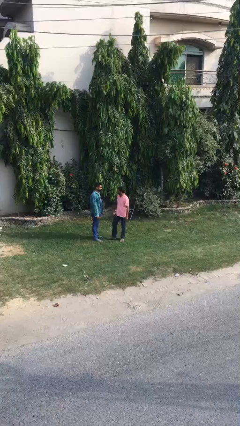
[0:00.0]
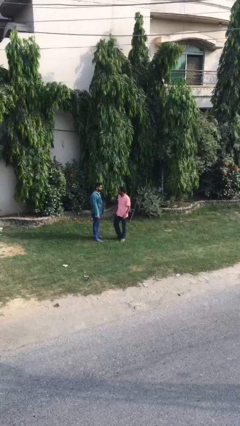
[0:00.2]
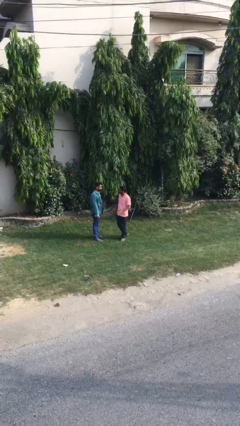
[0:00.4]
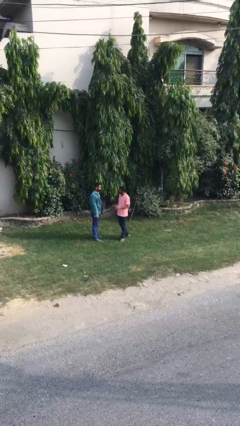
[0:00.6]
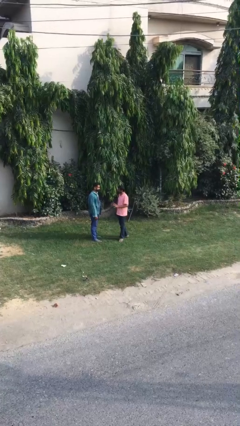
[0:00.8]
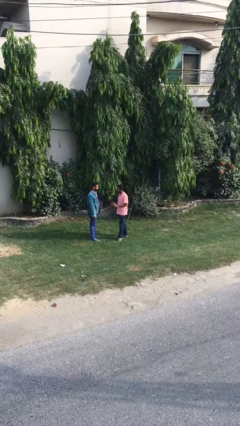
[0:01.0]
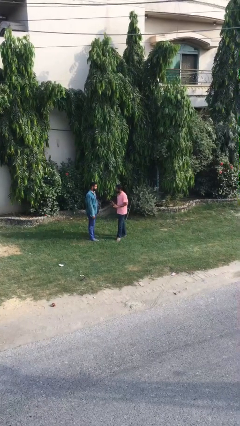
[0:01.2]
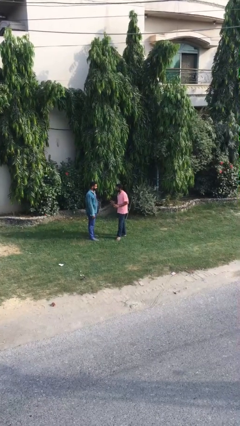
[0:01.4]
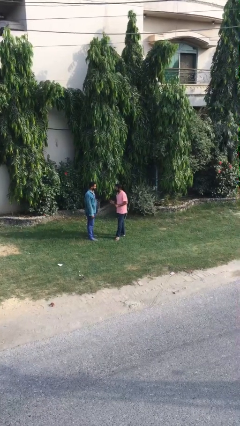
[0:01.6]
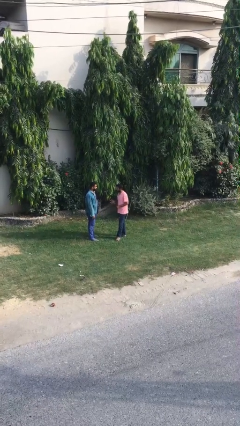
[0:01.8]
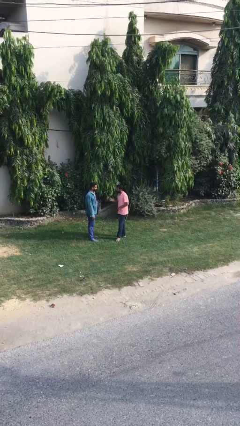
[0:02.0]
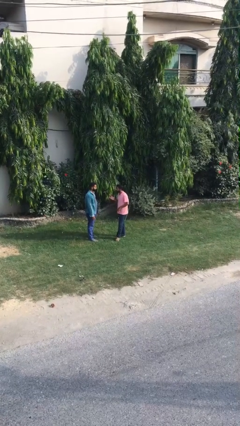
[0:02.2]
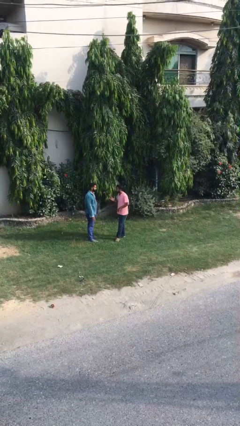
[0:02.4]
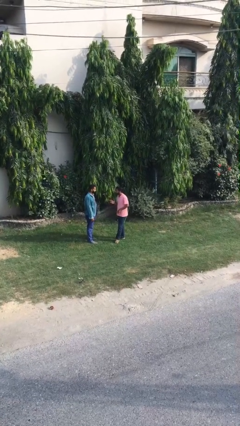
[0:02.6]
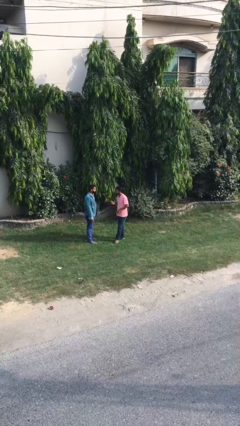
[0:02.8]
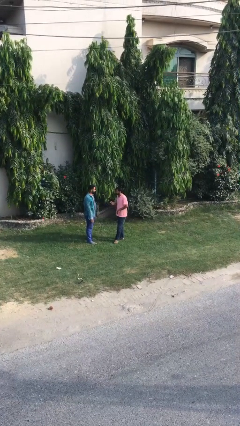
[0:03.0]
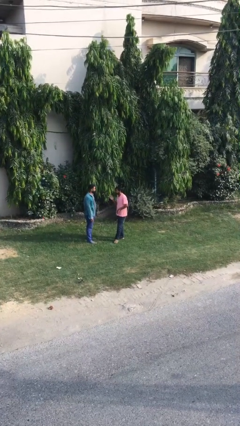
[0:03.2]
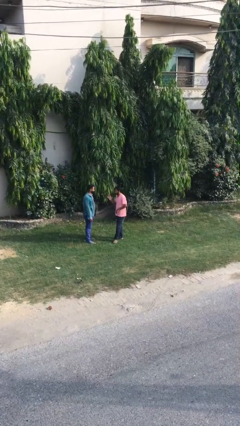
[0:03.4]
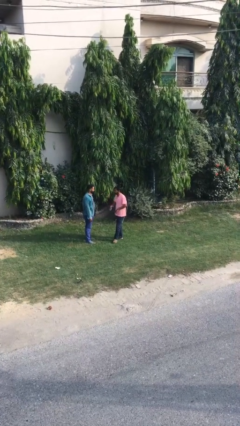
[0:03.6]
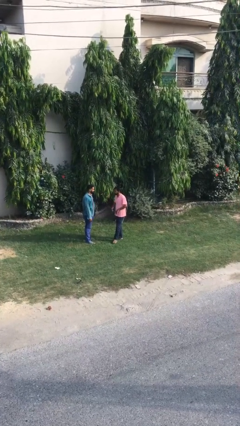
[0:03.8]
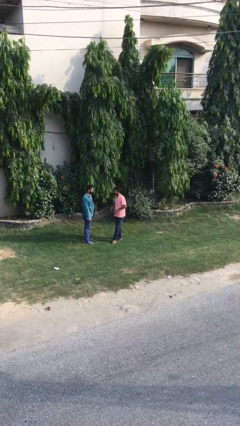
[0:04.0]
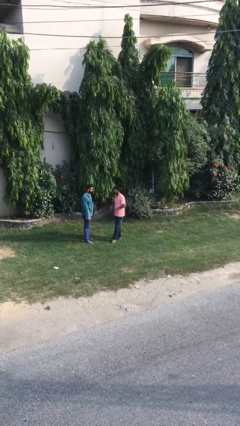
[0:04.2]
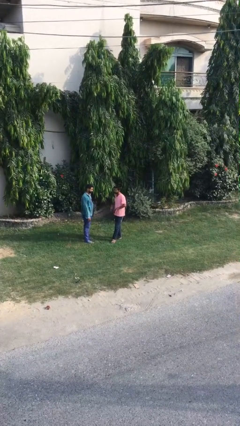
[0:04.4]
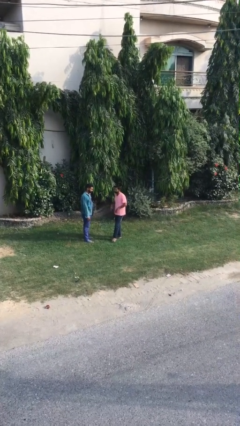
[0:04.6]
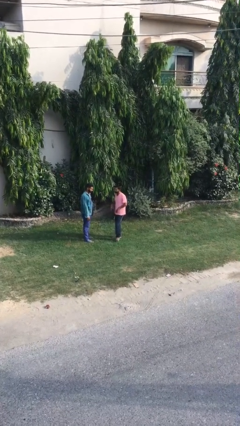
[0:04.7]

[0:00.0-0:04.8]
person talks to person

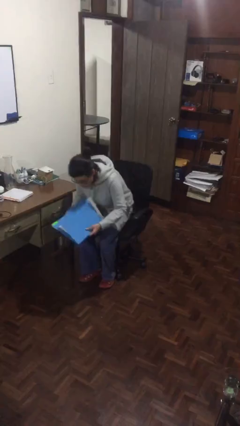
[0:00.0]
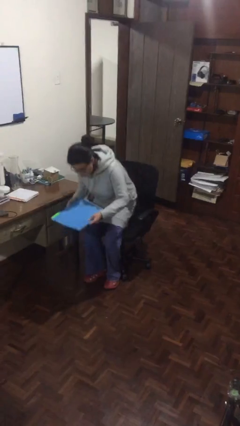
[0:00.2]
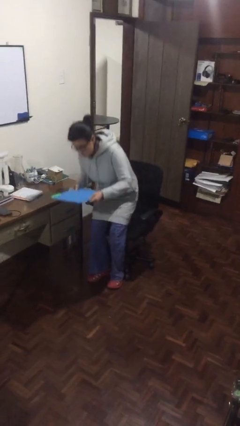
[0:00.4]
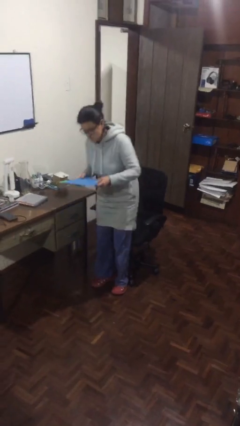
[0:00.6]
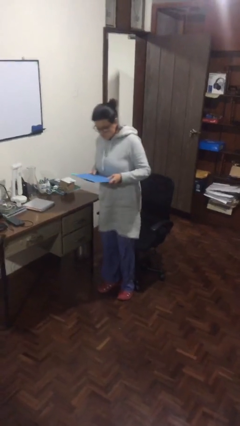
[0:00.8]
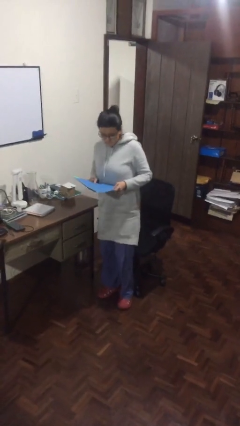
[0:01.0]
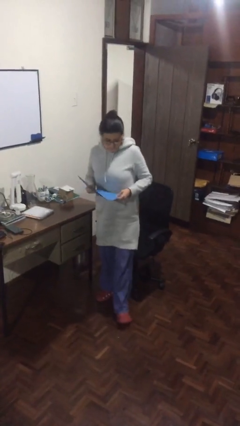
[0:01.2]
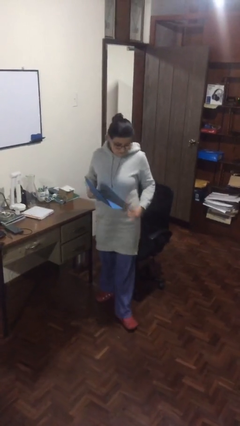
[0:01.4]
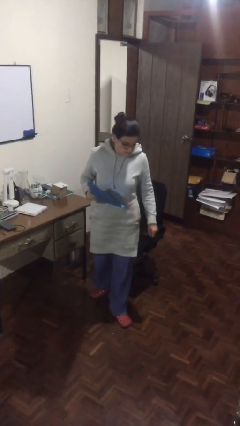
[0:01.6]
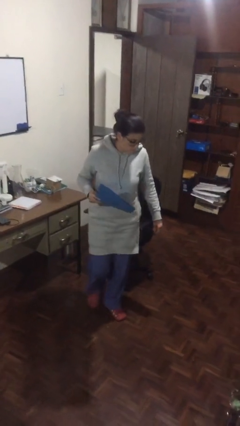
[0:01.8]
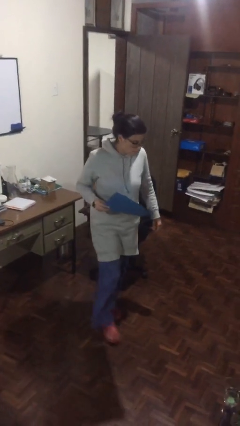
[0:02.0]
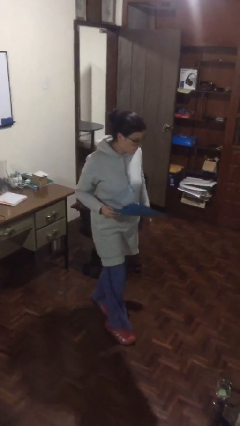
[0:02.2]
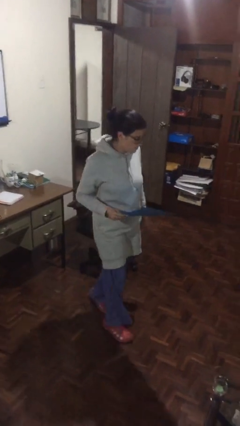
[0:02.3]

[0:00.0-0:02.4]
person stands up

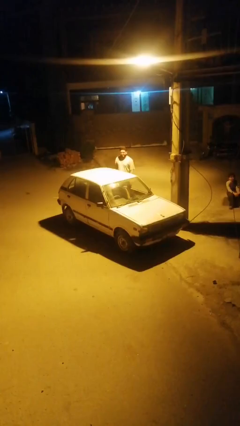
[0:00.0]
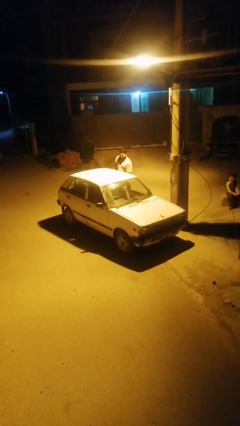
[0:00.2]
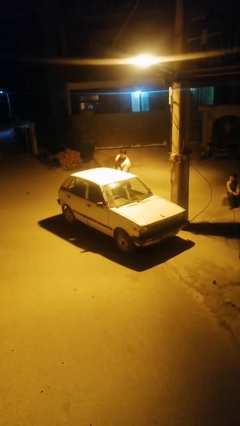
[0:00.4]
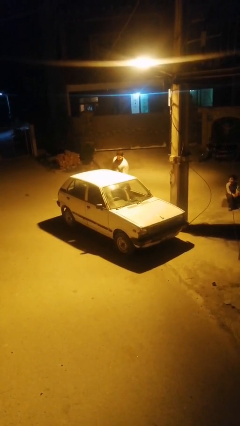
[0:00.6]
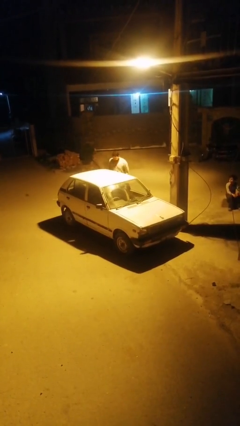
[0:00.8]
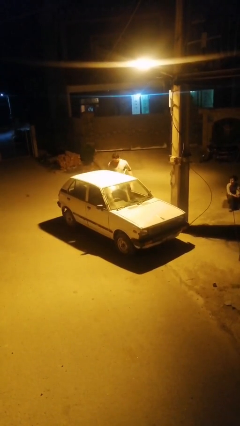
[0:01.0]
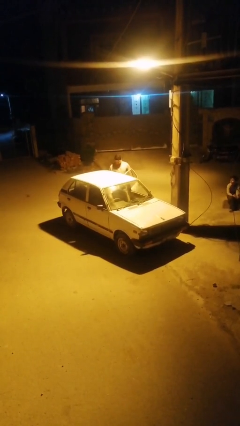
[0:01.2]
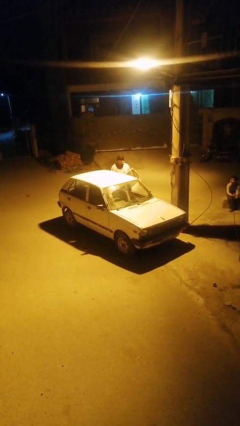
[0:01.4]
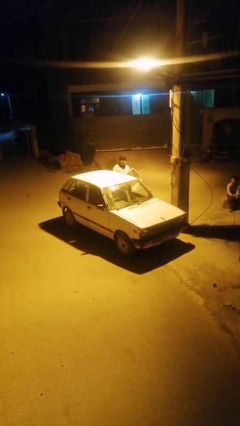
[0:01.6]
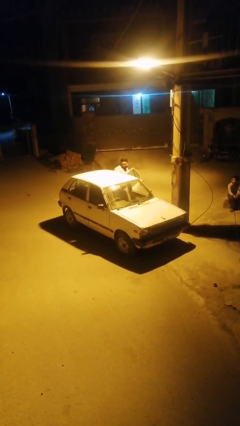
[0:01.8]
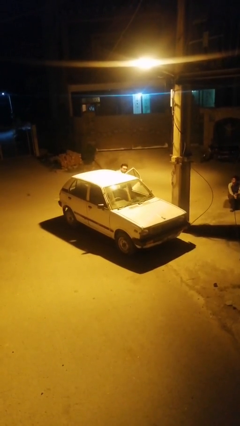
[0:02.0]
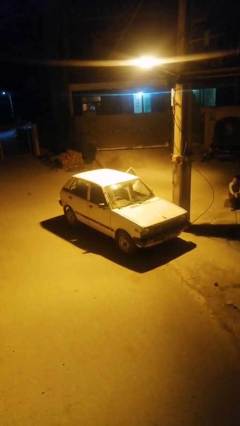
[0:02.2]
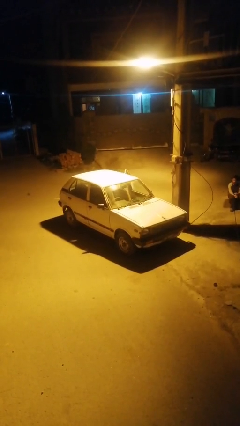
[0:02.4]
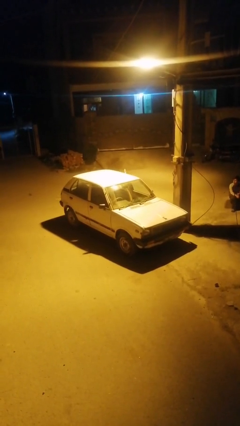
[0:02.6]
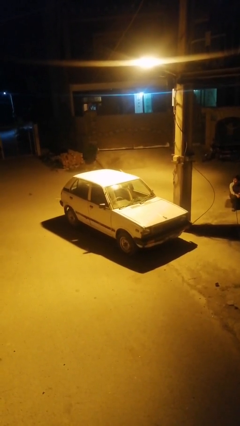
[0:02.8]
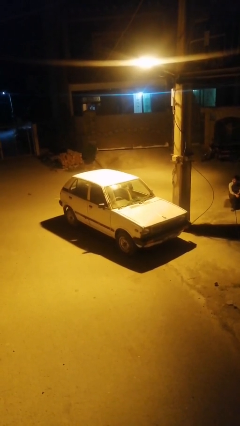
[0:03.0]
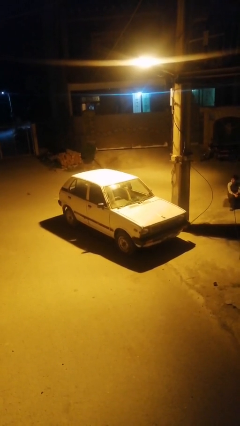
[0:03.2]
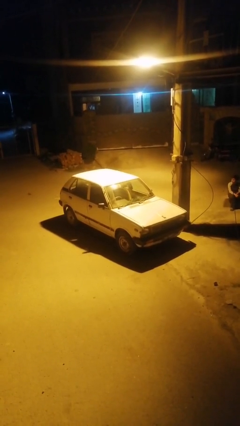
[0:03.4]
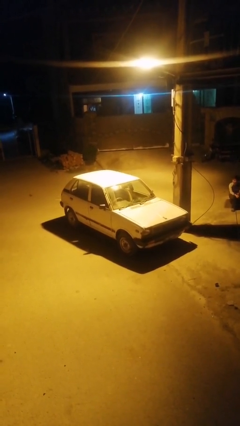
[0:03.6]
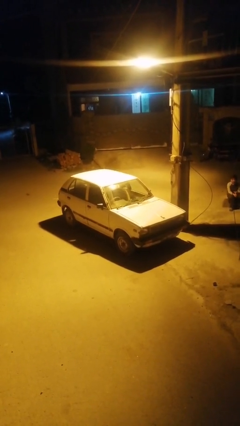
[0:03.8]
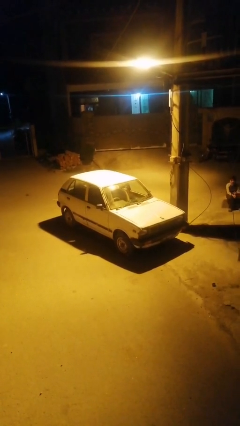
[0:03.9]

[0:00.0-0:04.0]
car picks up person

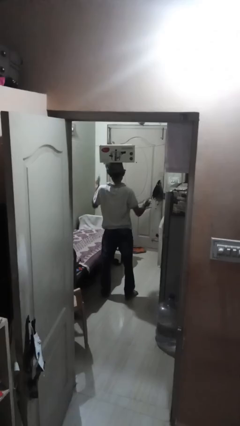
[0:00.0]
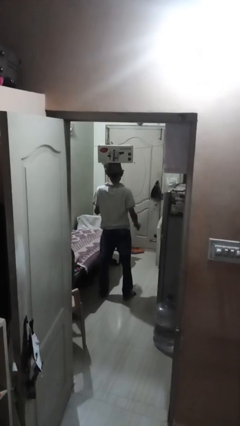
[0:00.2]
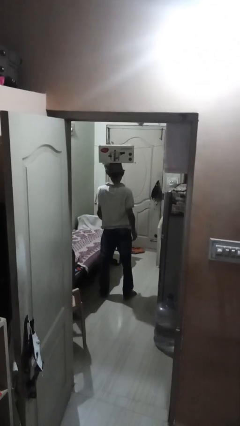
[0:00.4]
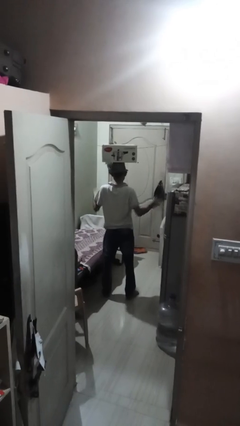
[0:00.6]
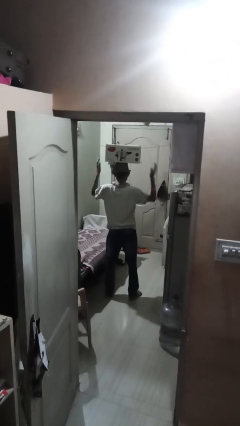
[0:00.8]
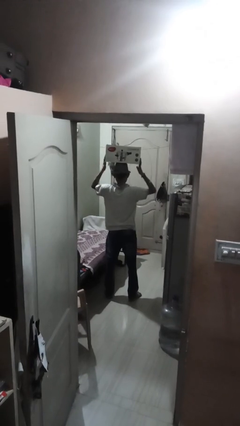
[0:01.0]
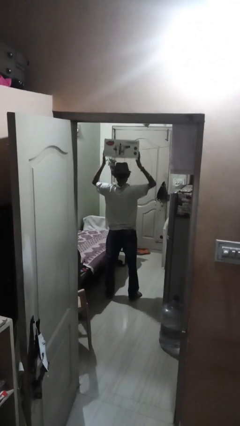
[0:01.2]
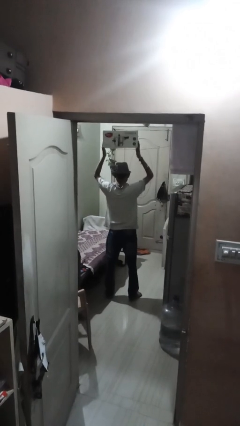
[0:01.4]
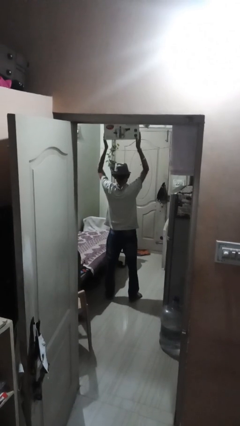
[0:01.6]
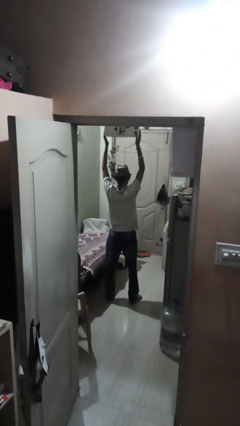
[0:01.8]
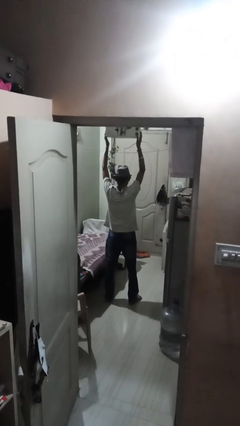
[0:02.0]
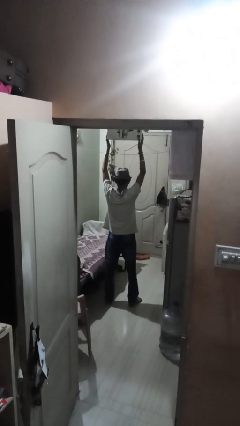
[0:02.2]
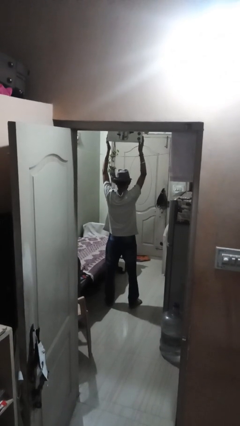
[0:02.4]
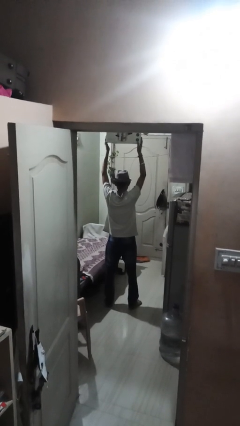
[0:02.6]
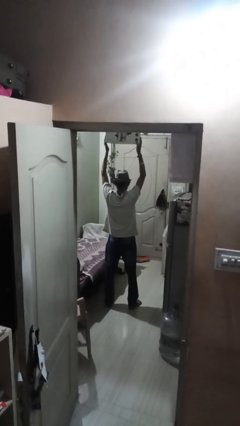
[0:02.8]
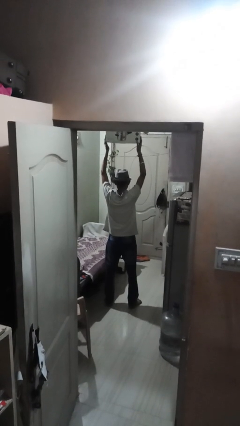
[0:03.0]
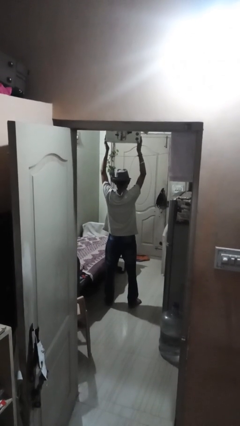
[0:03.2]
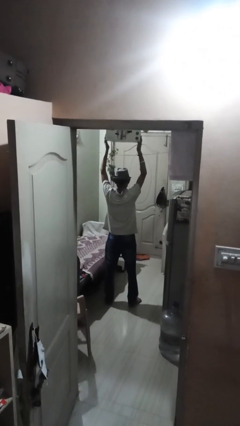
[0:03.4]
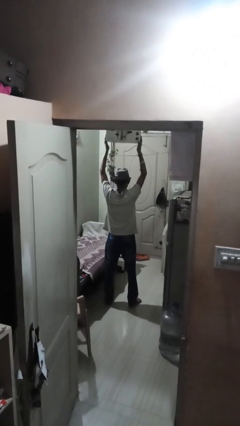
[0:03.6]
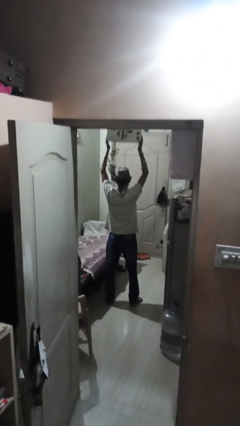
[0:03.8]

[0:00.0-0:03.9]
person holds object above head

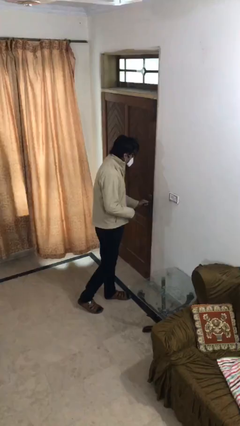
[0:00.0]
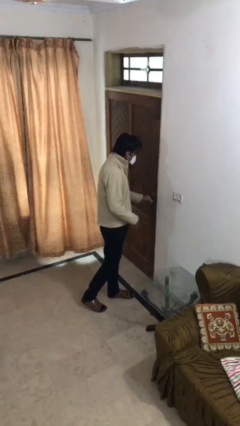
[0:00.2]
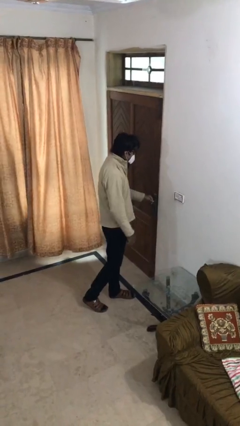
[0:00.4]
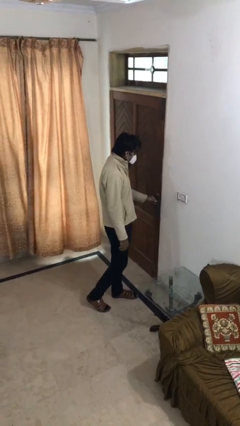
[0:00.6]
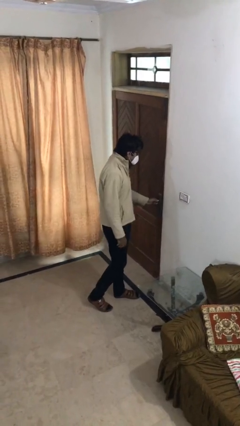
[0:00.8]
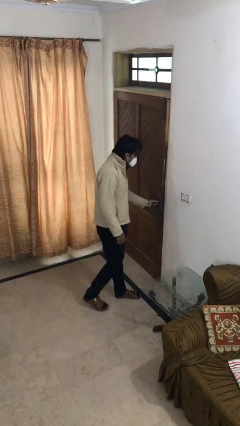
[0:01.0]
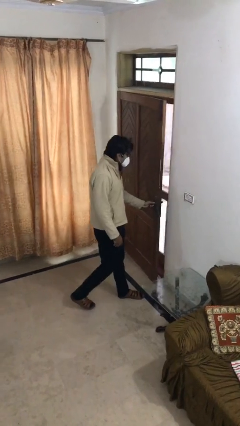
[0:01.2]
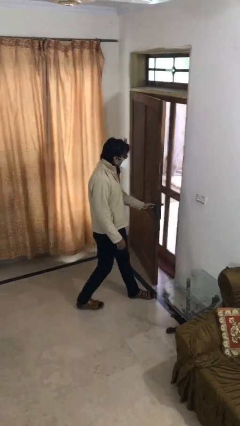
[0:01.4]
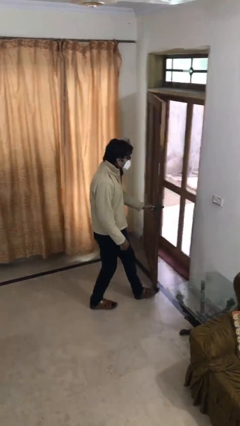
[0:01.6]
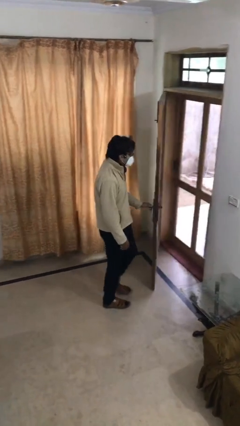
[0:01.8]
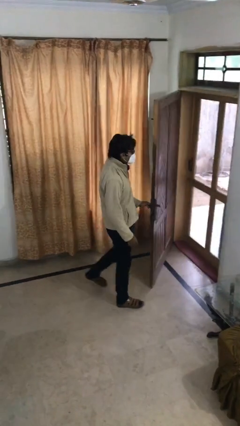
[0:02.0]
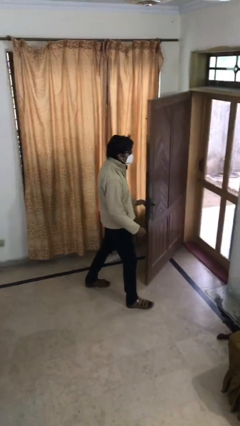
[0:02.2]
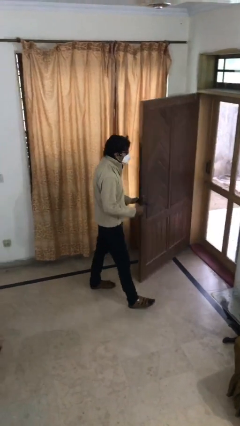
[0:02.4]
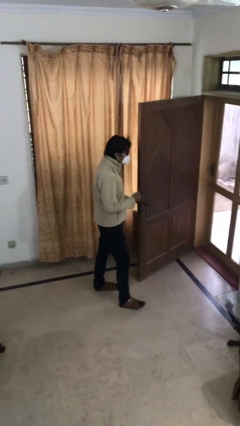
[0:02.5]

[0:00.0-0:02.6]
person opens facility door
